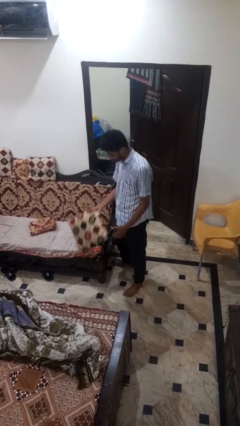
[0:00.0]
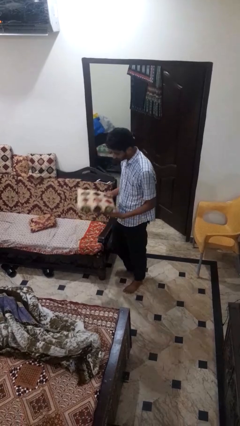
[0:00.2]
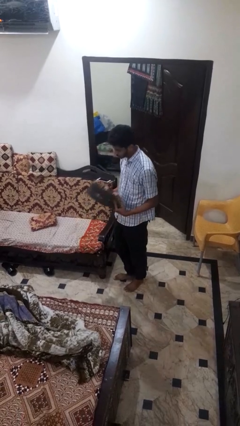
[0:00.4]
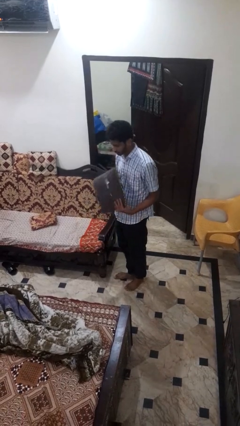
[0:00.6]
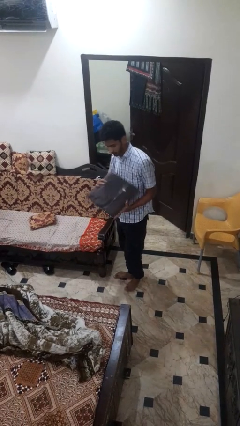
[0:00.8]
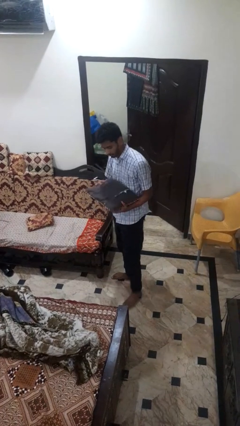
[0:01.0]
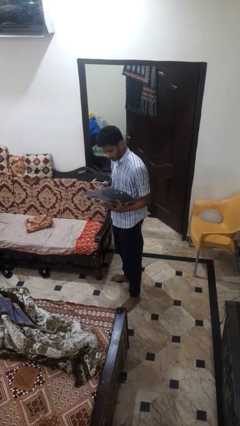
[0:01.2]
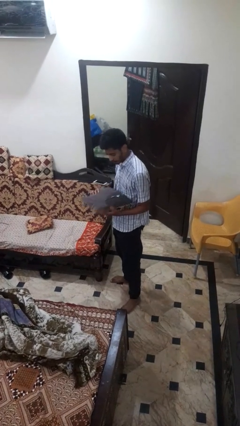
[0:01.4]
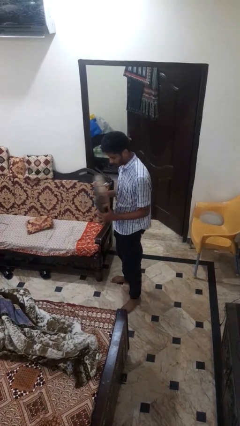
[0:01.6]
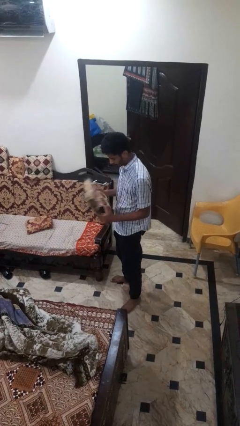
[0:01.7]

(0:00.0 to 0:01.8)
person picks up object from couch

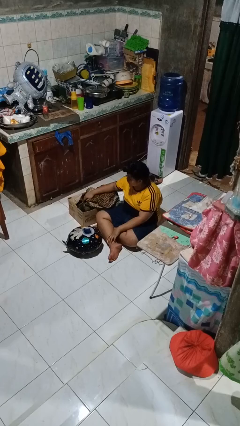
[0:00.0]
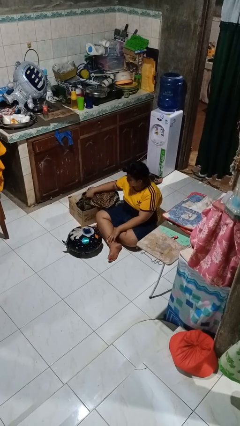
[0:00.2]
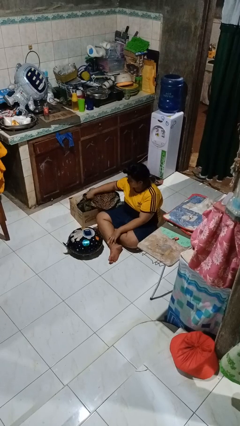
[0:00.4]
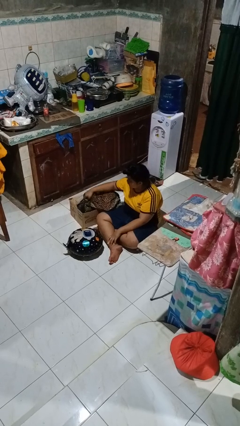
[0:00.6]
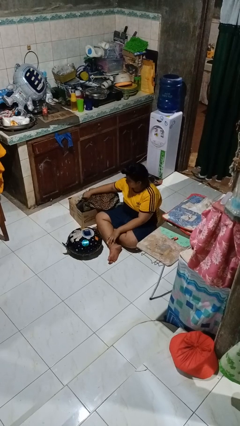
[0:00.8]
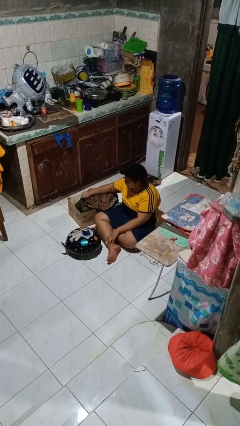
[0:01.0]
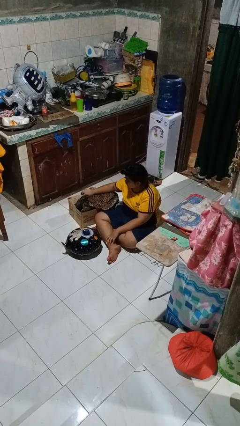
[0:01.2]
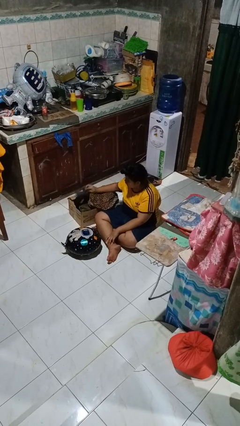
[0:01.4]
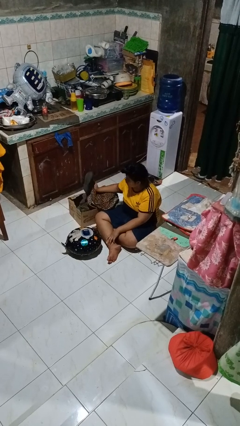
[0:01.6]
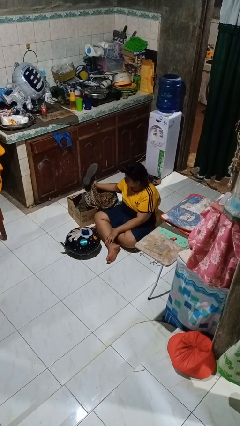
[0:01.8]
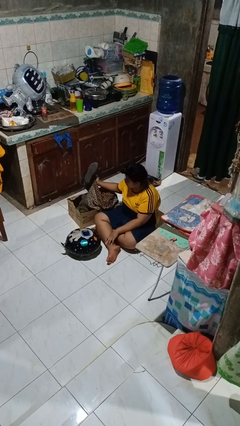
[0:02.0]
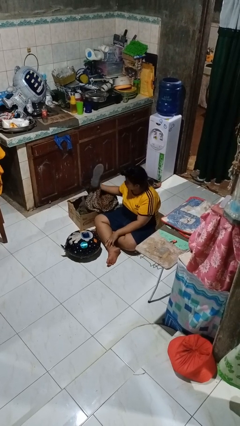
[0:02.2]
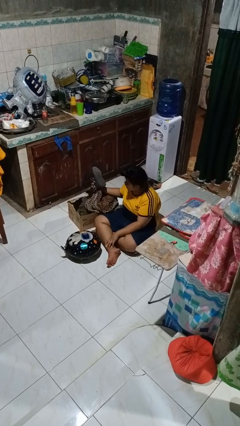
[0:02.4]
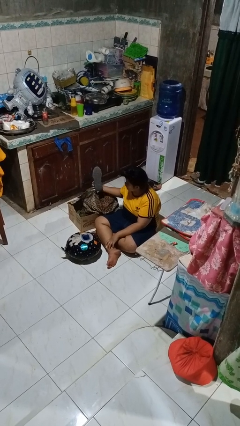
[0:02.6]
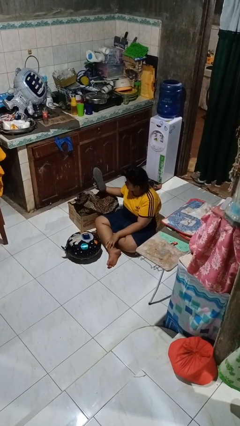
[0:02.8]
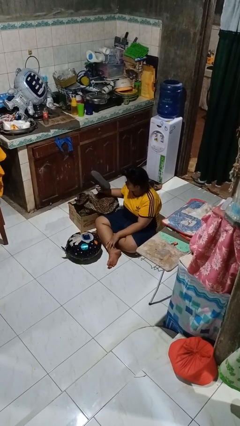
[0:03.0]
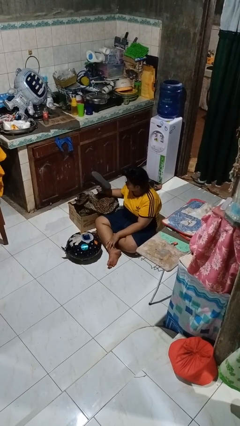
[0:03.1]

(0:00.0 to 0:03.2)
person takes object from box

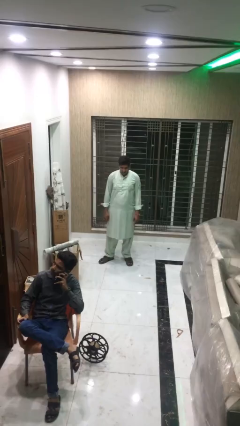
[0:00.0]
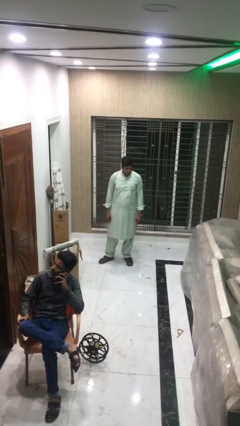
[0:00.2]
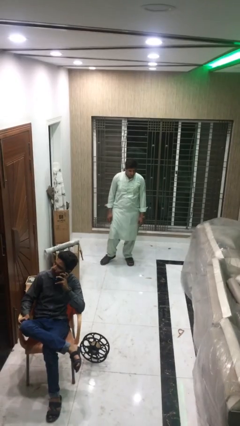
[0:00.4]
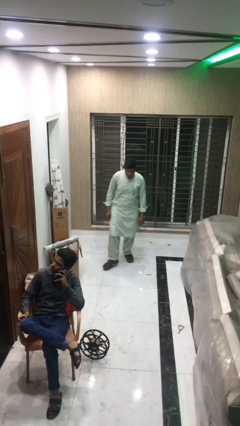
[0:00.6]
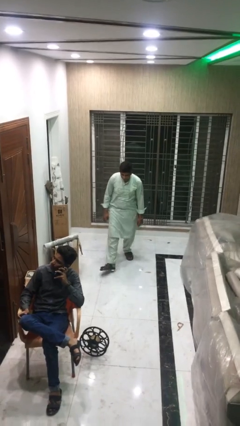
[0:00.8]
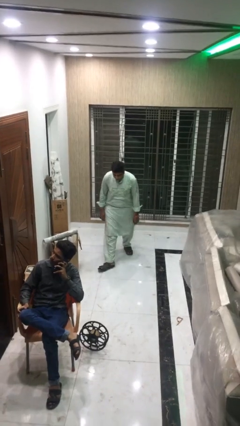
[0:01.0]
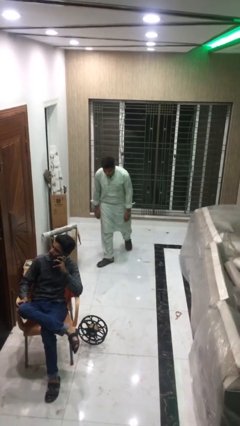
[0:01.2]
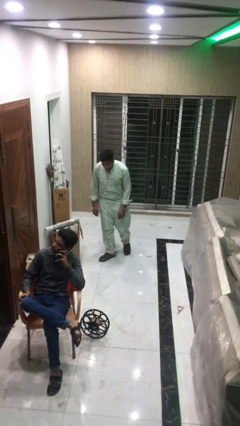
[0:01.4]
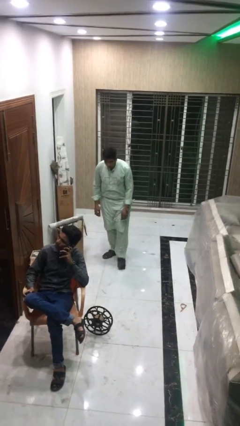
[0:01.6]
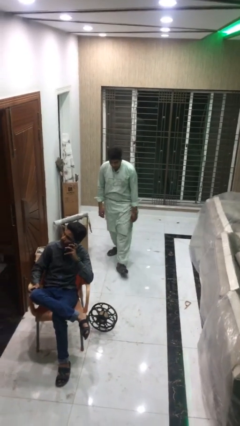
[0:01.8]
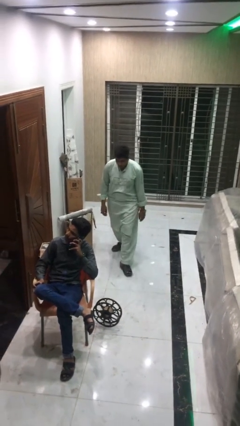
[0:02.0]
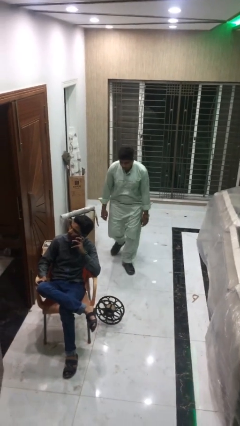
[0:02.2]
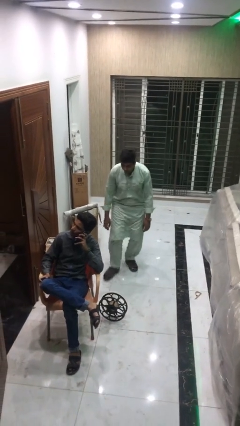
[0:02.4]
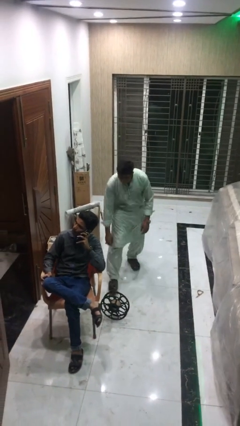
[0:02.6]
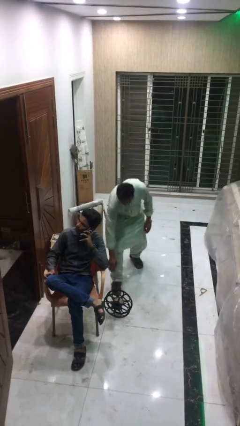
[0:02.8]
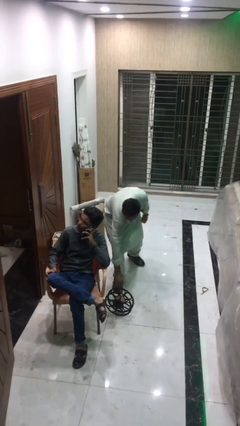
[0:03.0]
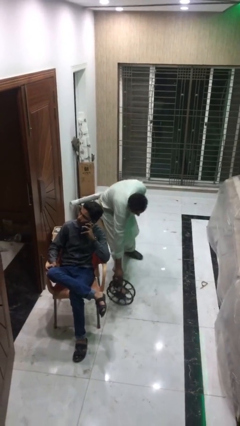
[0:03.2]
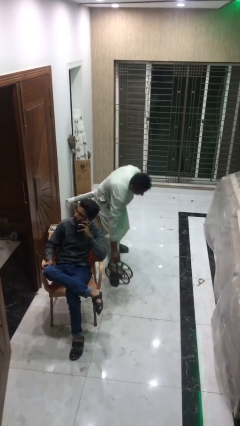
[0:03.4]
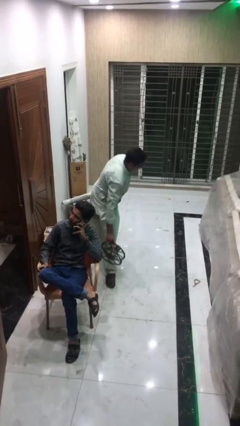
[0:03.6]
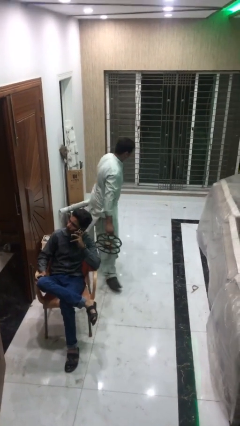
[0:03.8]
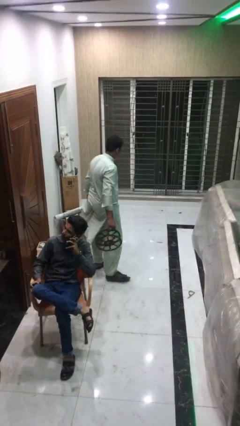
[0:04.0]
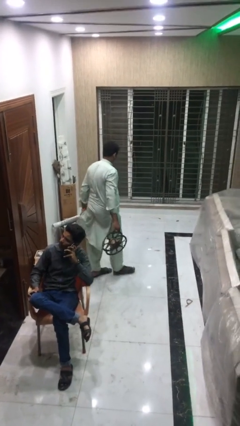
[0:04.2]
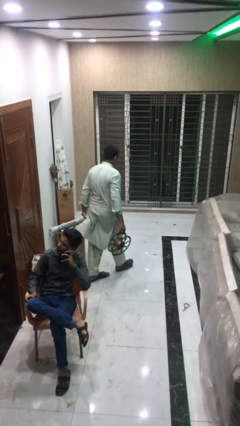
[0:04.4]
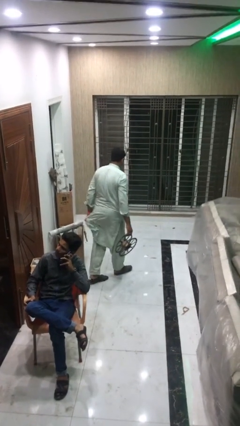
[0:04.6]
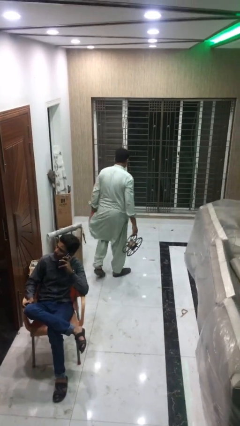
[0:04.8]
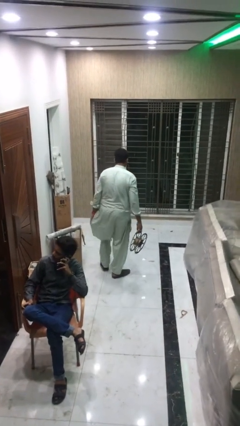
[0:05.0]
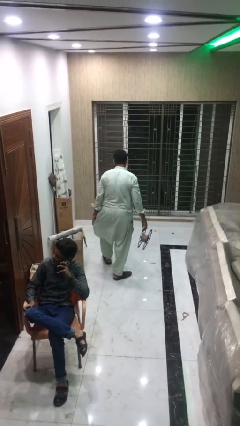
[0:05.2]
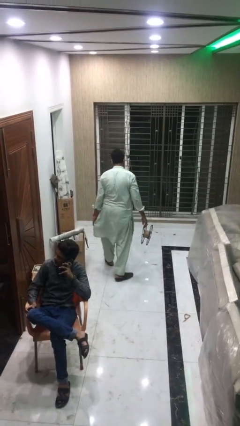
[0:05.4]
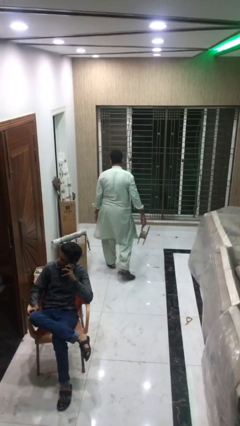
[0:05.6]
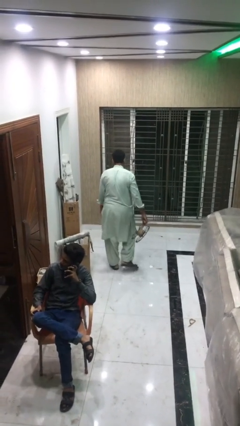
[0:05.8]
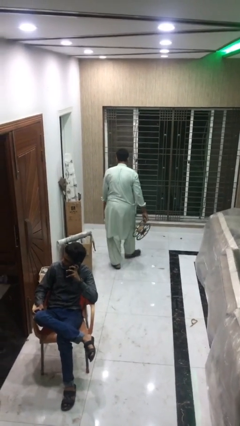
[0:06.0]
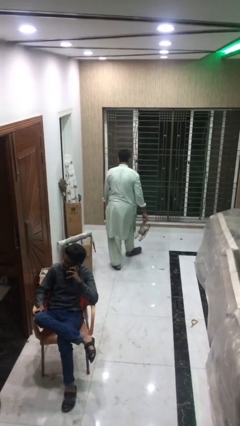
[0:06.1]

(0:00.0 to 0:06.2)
person steals object from person

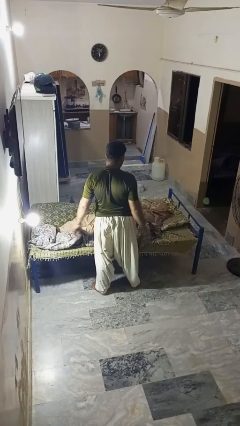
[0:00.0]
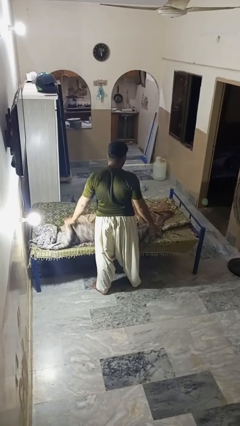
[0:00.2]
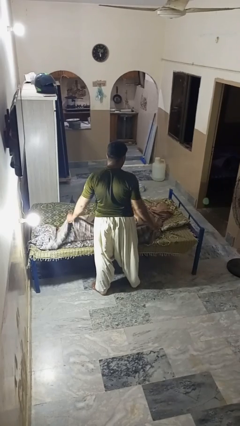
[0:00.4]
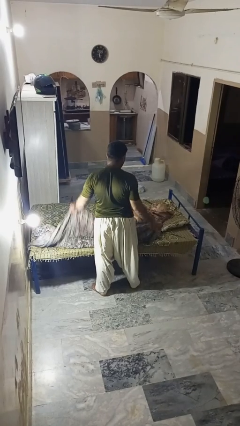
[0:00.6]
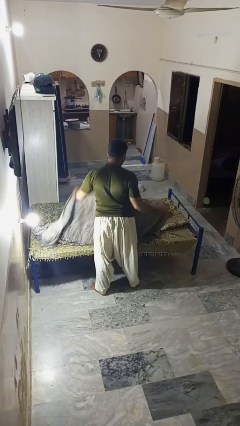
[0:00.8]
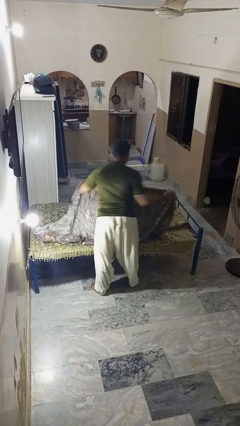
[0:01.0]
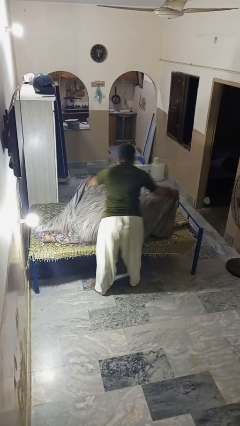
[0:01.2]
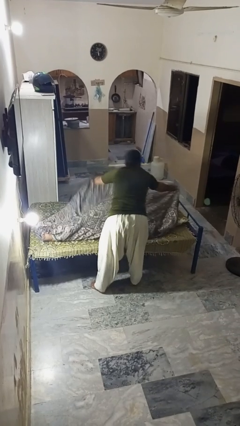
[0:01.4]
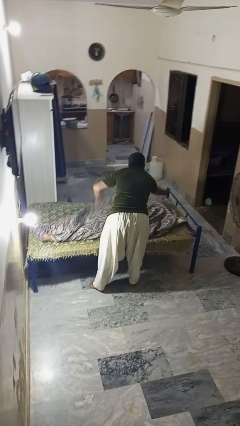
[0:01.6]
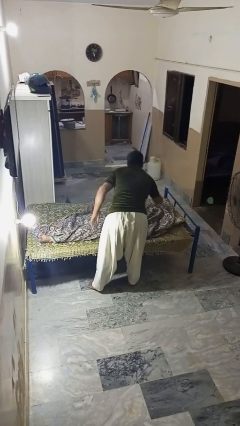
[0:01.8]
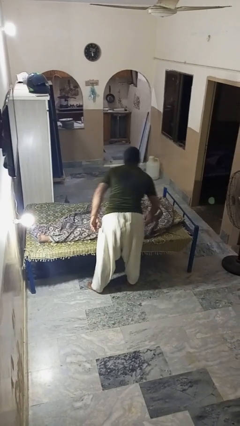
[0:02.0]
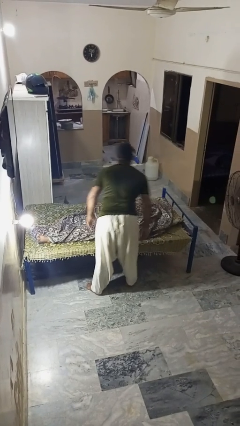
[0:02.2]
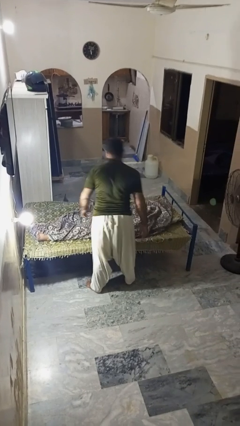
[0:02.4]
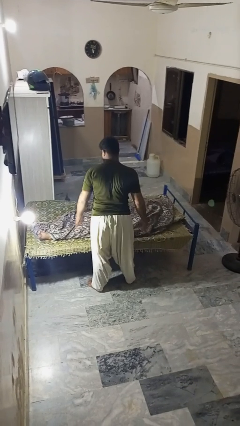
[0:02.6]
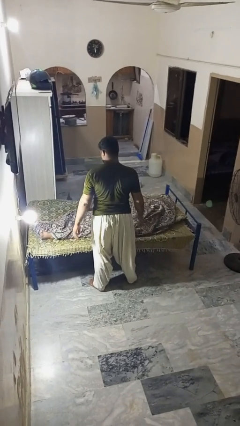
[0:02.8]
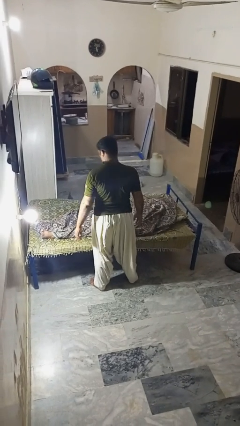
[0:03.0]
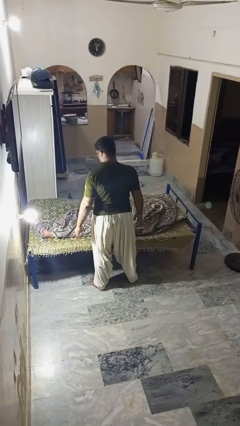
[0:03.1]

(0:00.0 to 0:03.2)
person covers friend with blanket

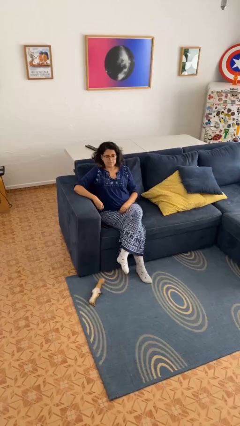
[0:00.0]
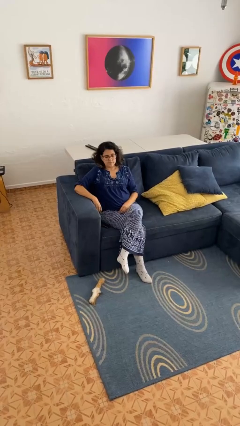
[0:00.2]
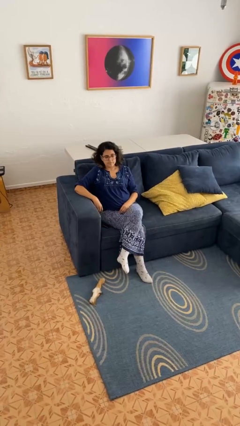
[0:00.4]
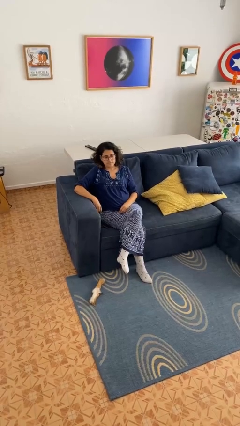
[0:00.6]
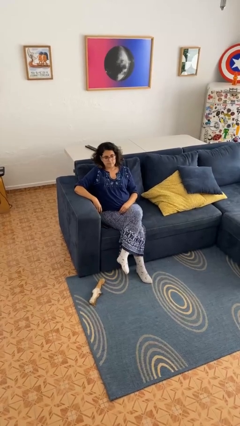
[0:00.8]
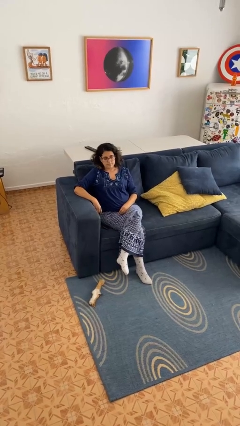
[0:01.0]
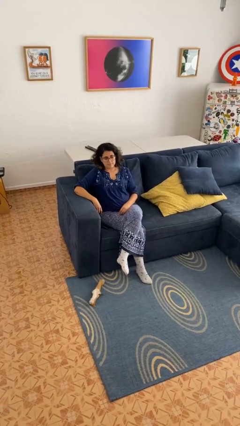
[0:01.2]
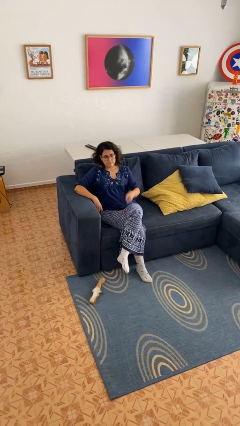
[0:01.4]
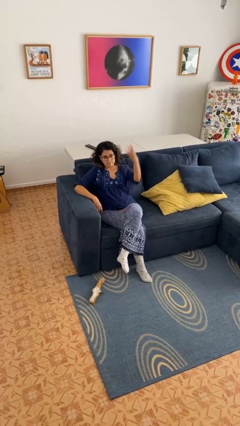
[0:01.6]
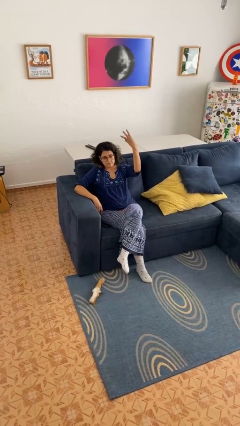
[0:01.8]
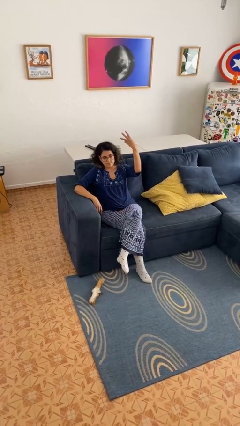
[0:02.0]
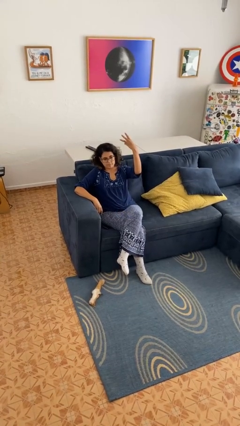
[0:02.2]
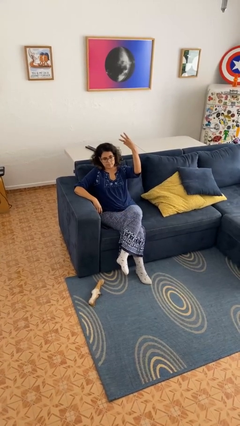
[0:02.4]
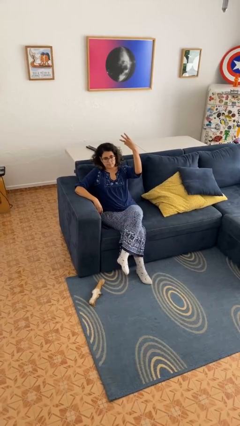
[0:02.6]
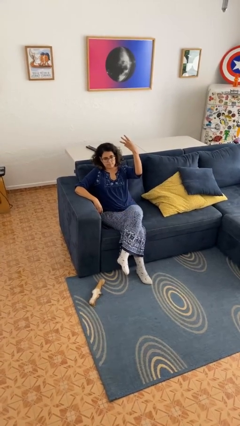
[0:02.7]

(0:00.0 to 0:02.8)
person gestures number three
